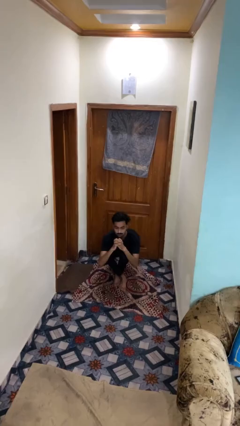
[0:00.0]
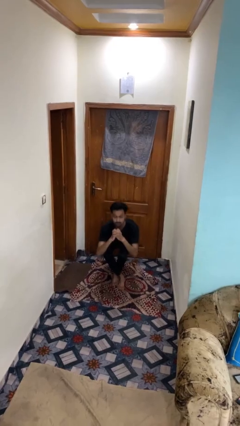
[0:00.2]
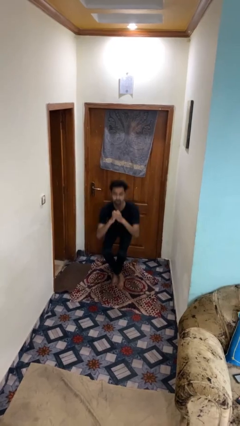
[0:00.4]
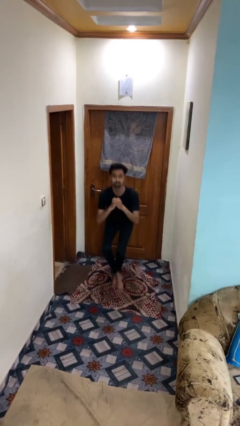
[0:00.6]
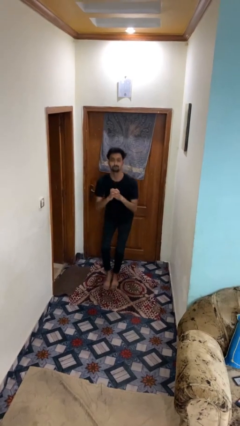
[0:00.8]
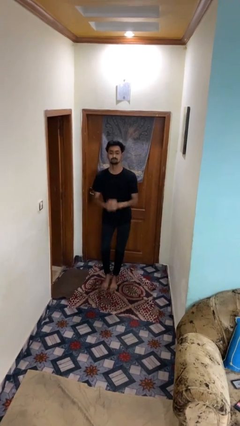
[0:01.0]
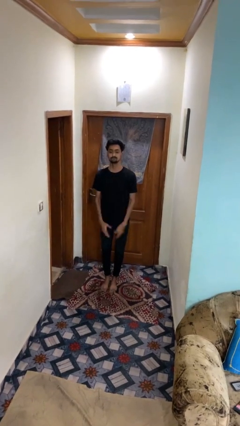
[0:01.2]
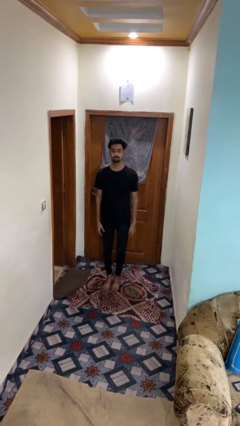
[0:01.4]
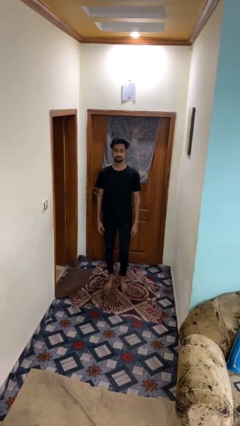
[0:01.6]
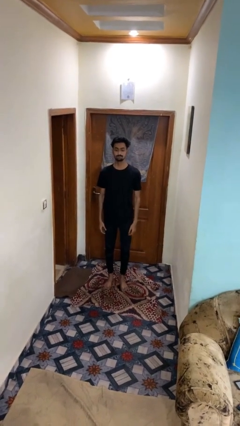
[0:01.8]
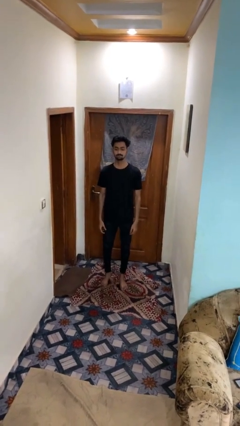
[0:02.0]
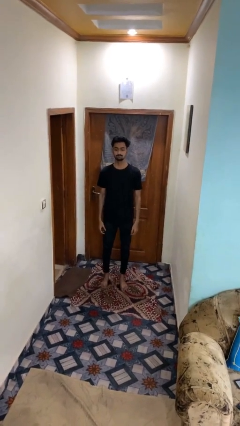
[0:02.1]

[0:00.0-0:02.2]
person stands up from floor

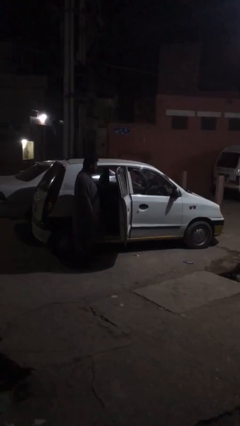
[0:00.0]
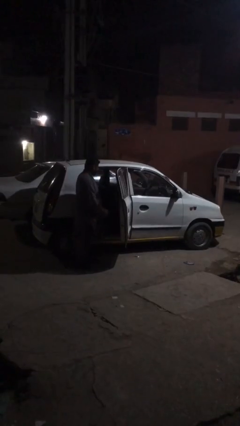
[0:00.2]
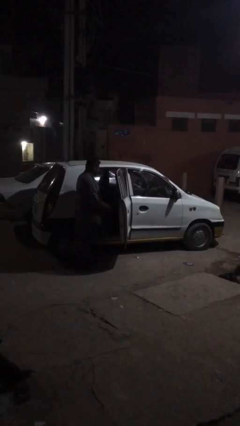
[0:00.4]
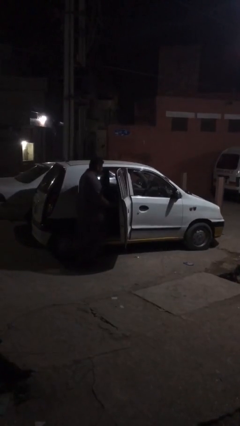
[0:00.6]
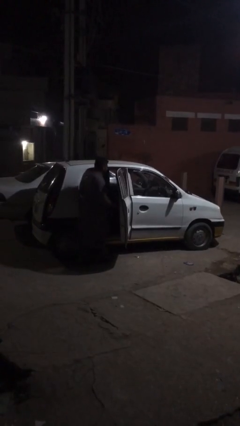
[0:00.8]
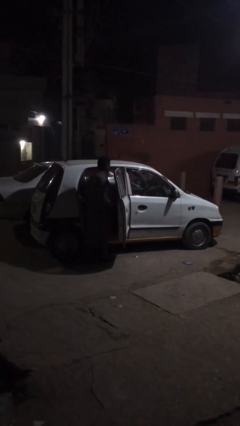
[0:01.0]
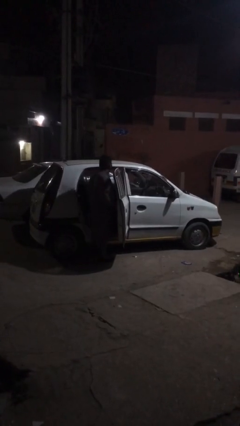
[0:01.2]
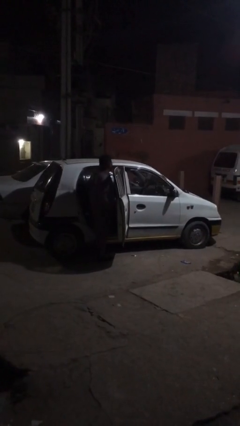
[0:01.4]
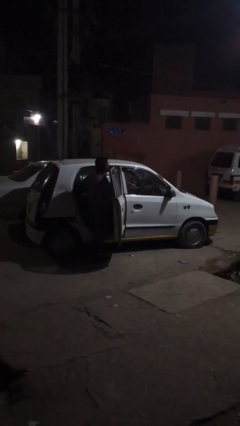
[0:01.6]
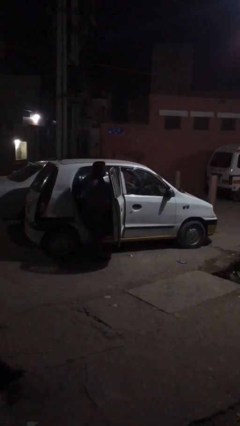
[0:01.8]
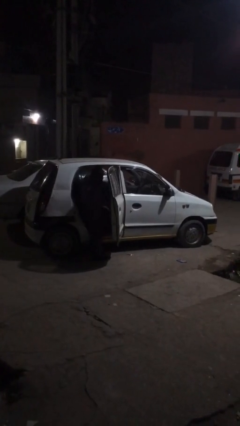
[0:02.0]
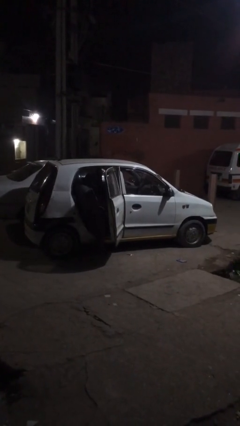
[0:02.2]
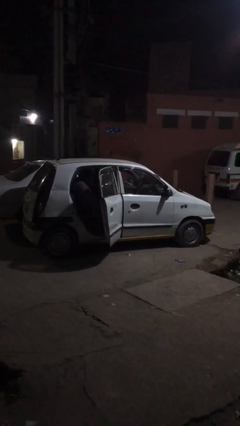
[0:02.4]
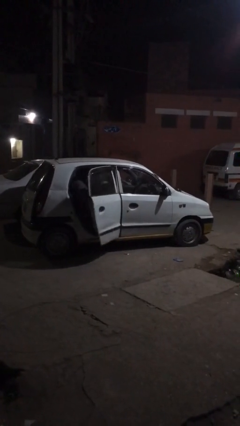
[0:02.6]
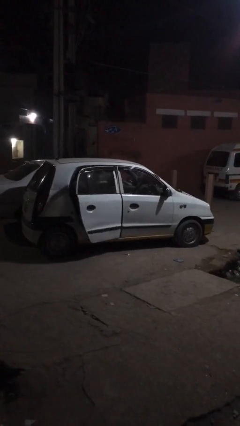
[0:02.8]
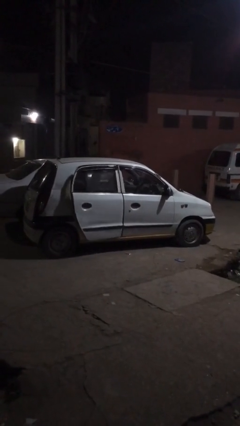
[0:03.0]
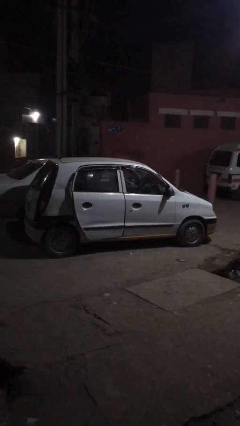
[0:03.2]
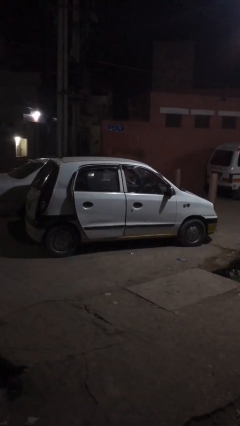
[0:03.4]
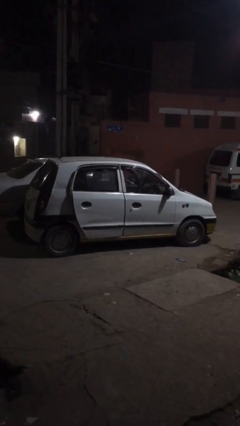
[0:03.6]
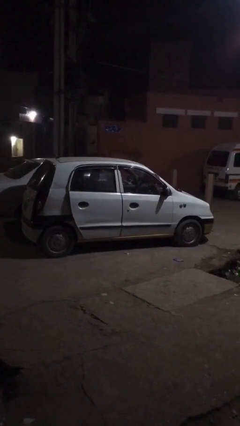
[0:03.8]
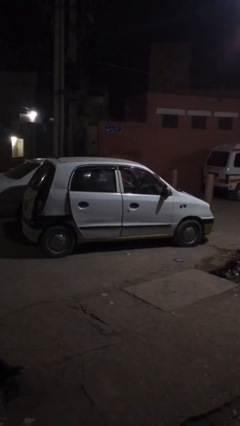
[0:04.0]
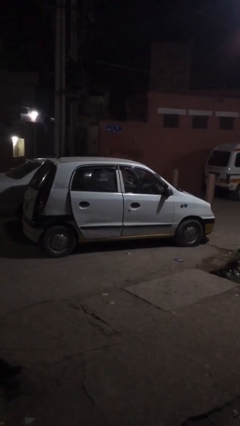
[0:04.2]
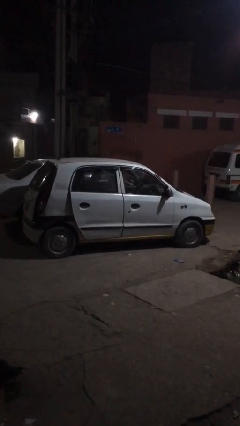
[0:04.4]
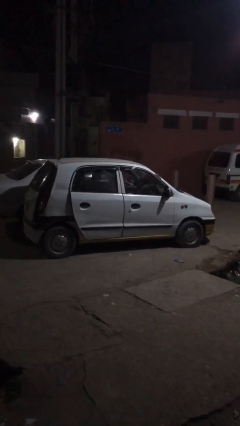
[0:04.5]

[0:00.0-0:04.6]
car picks up person

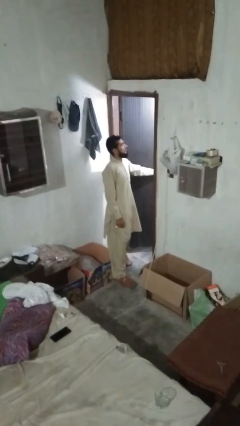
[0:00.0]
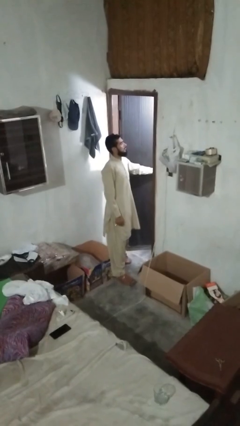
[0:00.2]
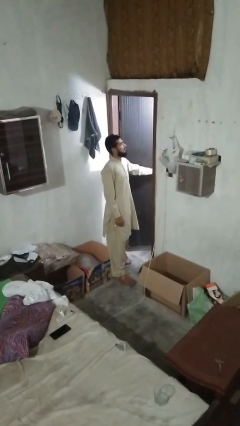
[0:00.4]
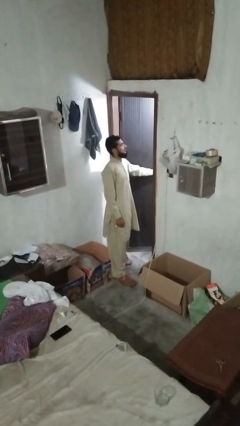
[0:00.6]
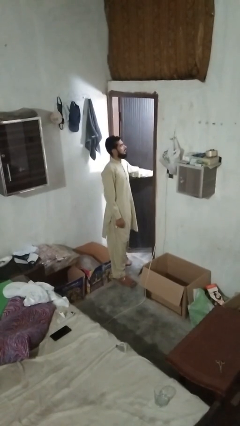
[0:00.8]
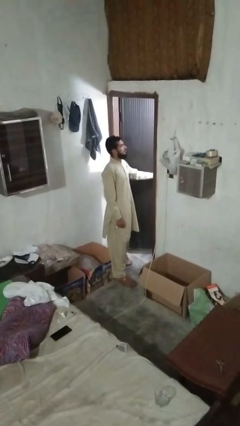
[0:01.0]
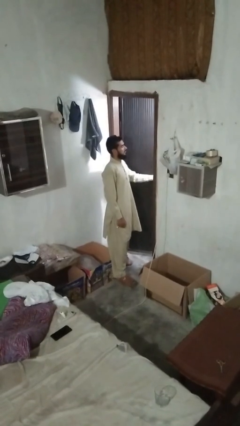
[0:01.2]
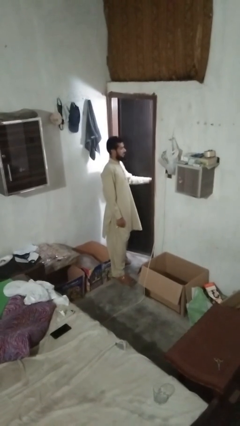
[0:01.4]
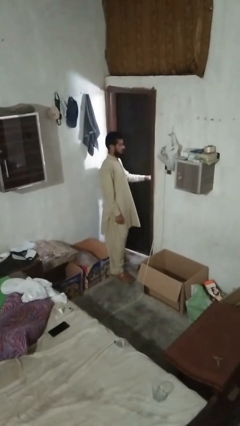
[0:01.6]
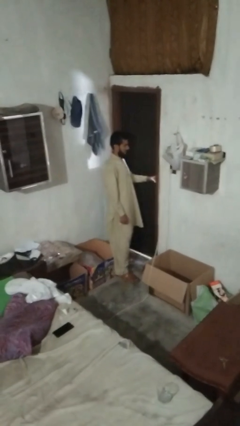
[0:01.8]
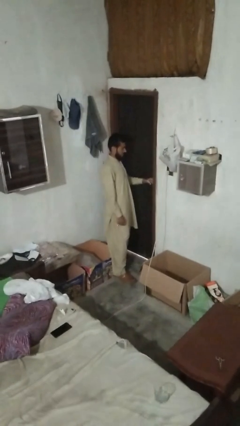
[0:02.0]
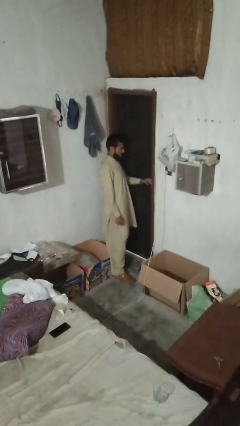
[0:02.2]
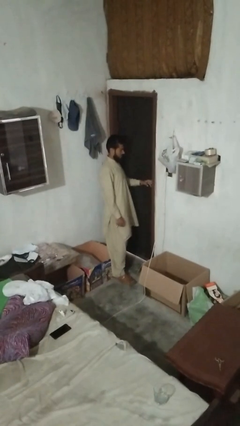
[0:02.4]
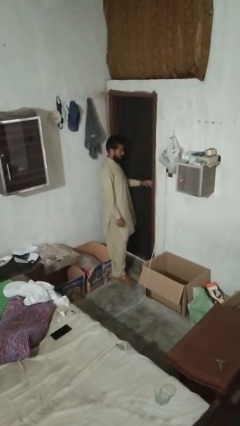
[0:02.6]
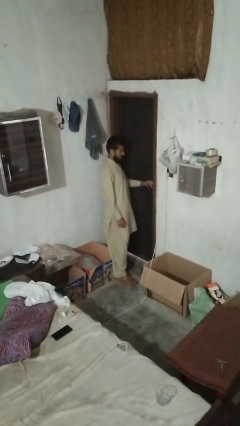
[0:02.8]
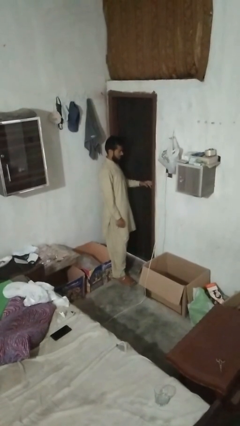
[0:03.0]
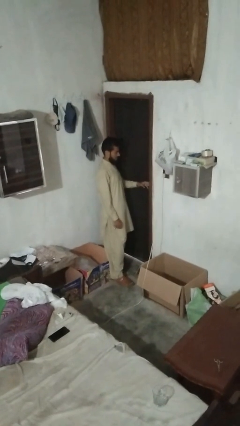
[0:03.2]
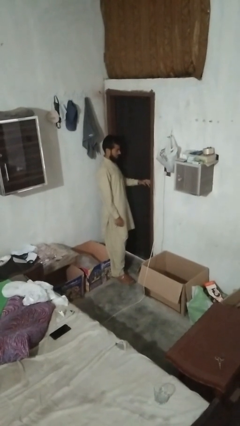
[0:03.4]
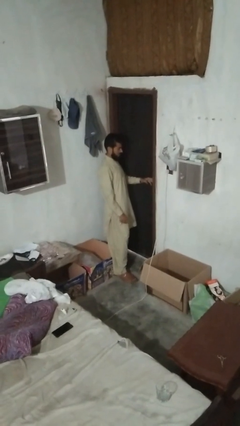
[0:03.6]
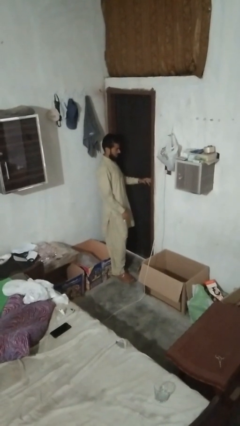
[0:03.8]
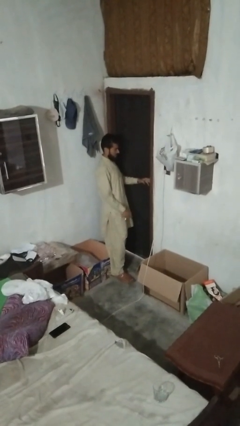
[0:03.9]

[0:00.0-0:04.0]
person closes facility door

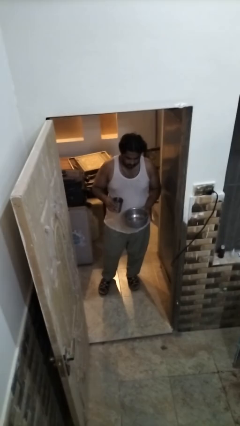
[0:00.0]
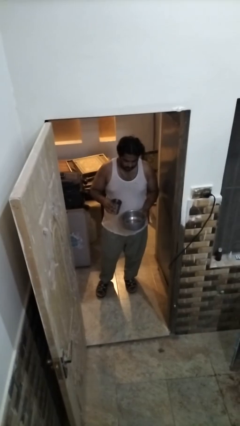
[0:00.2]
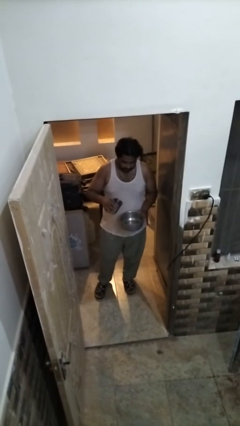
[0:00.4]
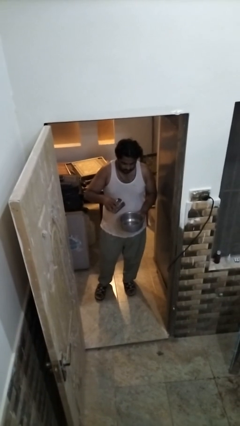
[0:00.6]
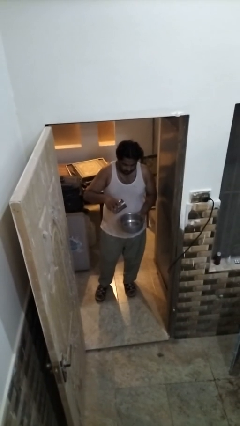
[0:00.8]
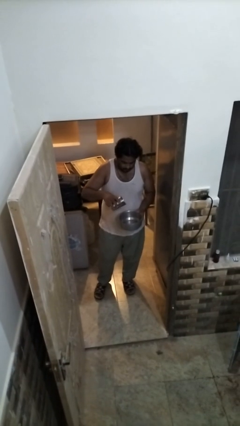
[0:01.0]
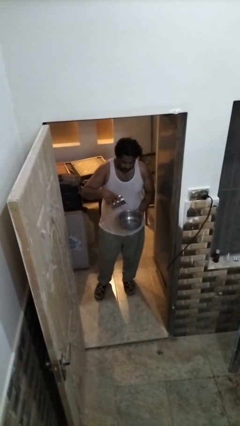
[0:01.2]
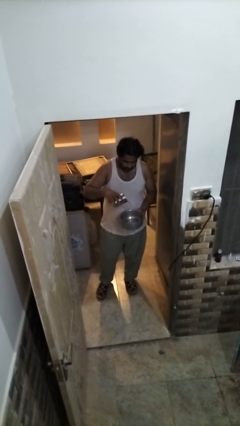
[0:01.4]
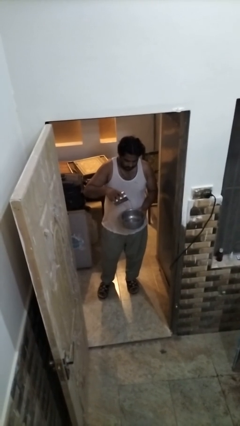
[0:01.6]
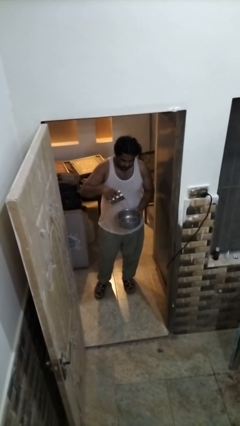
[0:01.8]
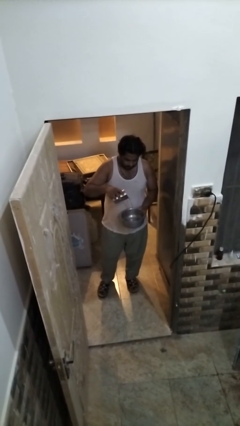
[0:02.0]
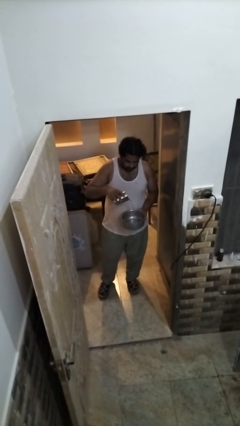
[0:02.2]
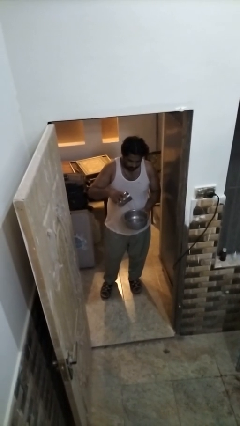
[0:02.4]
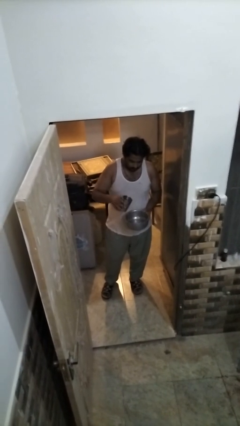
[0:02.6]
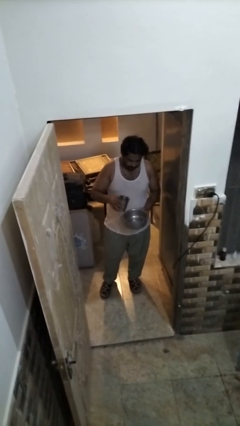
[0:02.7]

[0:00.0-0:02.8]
person pours into bowl

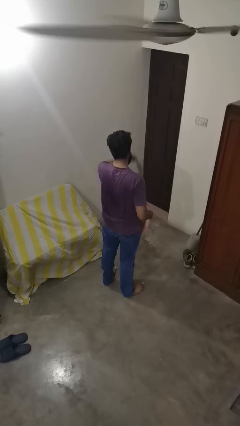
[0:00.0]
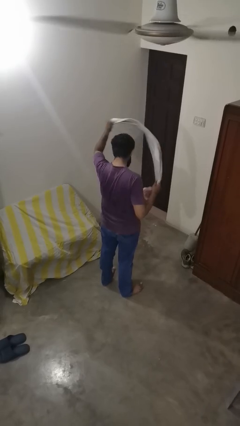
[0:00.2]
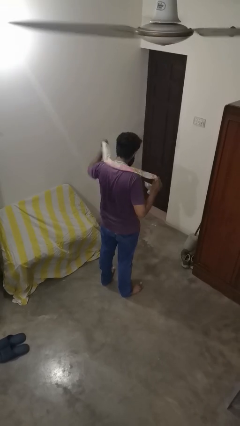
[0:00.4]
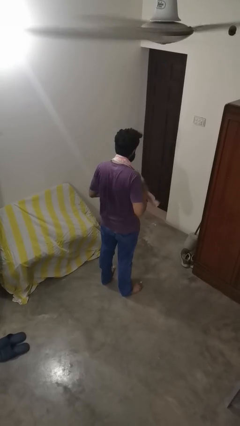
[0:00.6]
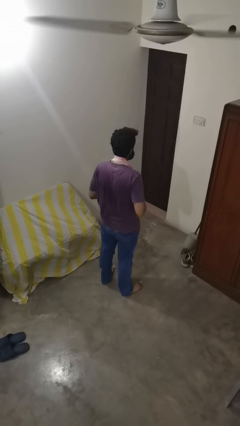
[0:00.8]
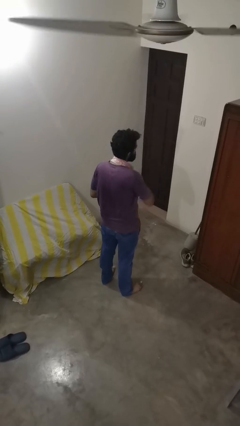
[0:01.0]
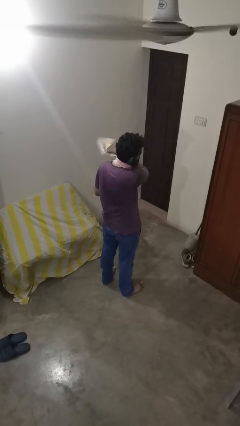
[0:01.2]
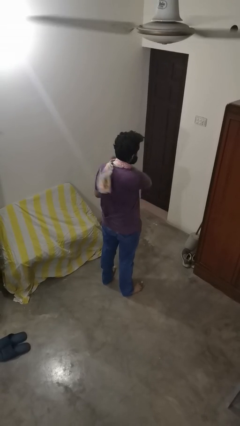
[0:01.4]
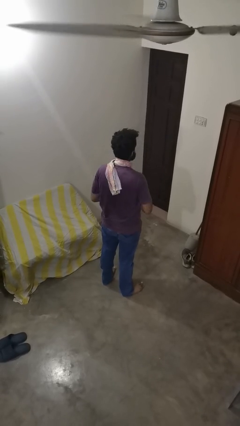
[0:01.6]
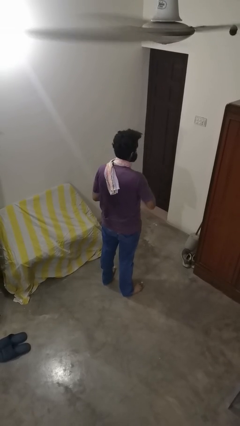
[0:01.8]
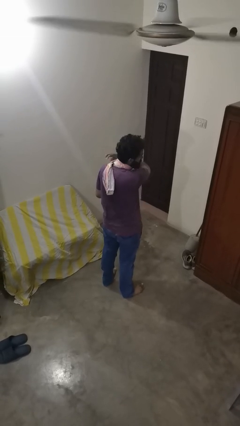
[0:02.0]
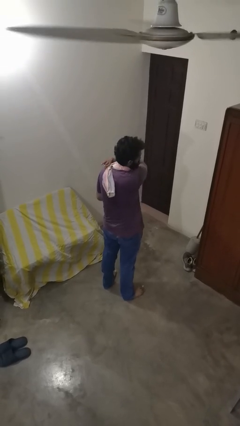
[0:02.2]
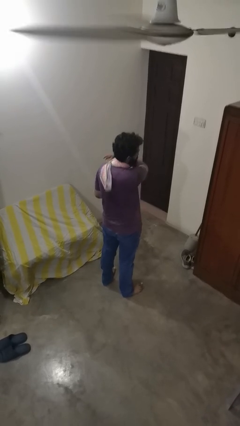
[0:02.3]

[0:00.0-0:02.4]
person puts on scarf

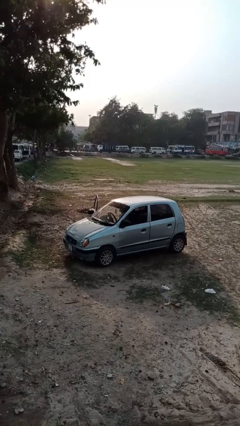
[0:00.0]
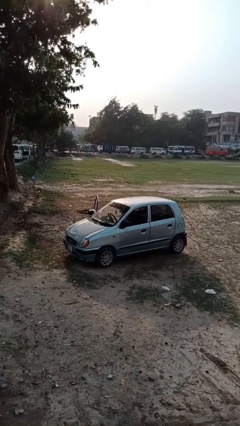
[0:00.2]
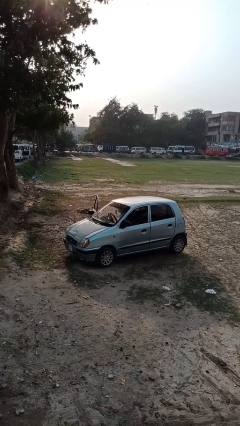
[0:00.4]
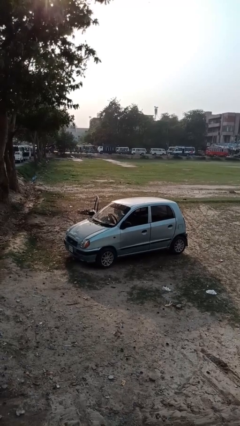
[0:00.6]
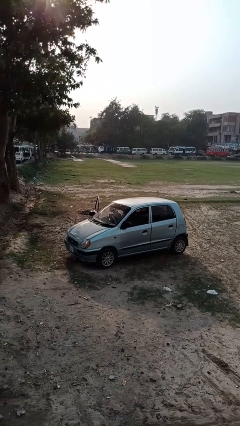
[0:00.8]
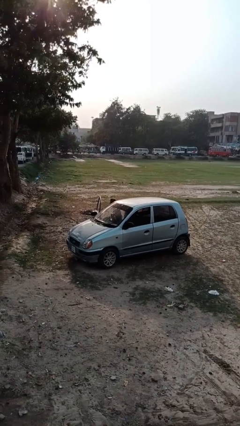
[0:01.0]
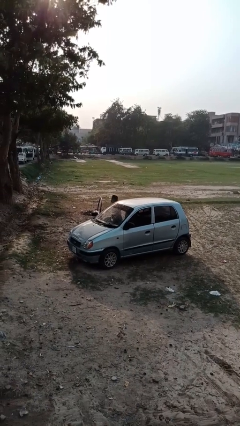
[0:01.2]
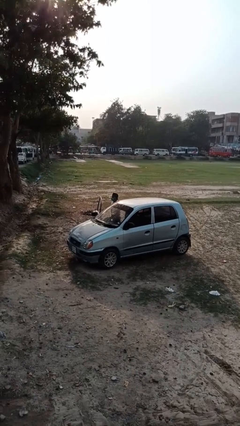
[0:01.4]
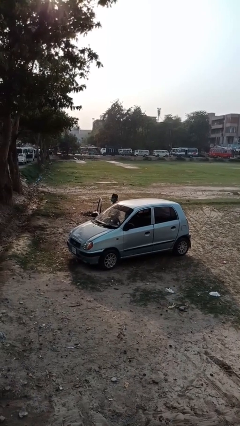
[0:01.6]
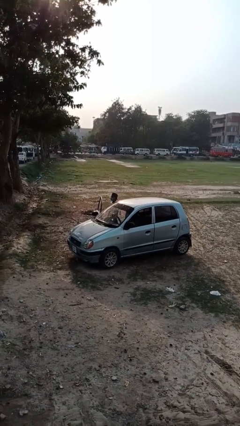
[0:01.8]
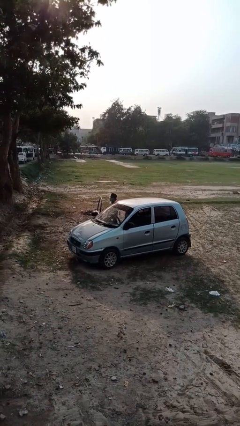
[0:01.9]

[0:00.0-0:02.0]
person exits car
